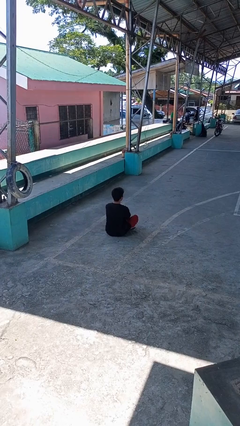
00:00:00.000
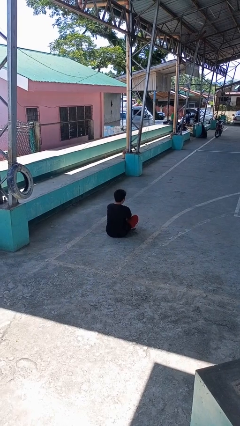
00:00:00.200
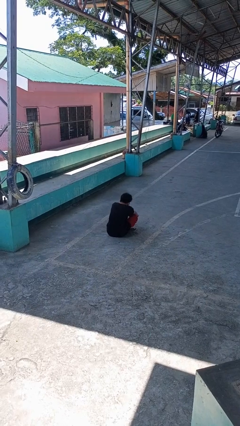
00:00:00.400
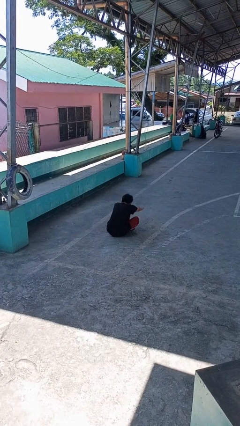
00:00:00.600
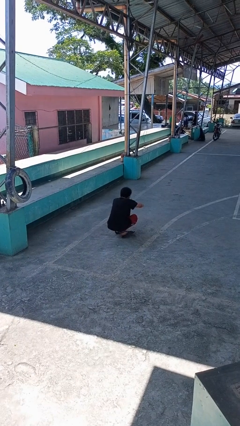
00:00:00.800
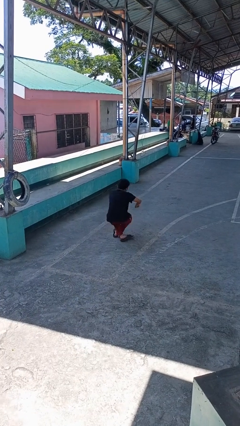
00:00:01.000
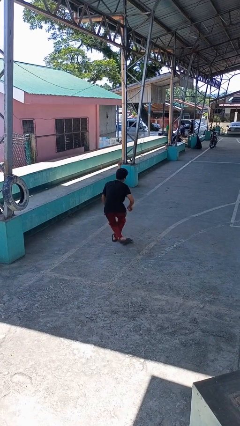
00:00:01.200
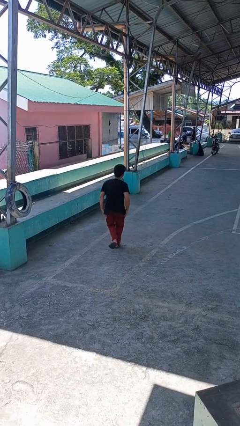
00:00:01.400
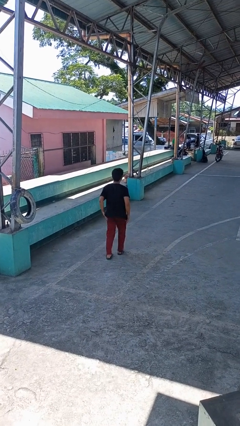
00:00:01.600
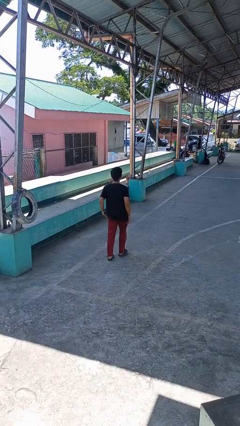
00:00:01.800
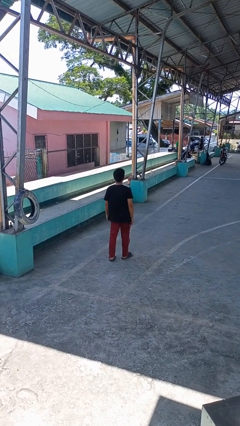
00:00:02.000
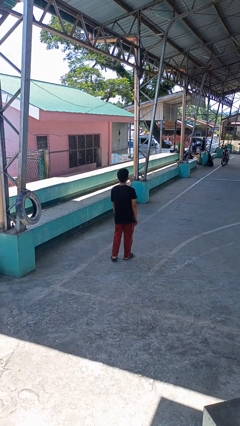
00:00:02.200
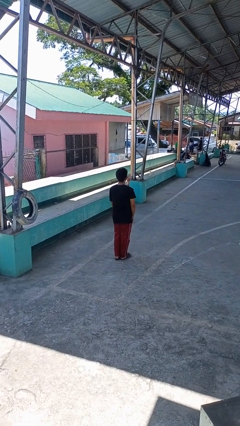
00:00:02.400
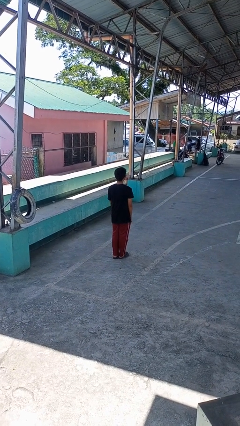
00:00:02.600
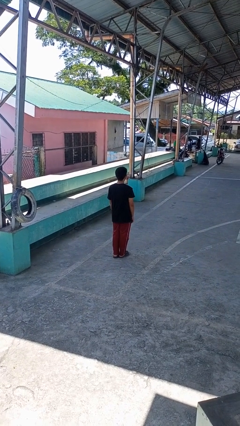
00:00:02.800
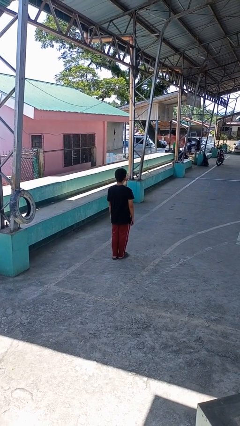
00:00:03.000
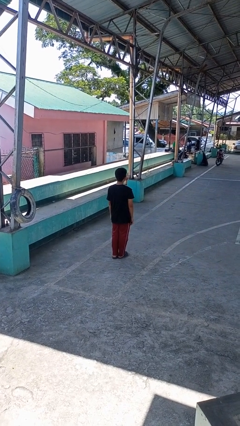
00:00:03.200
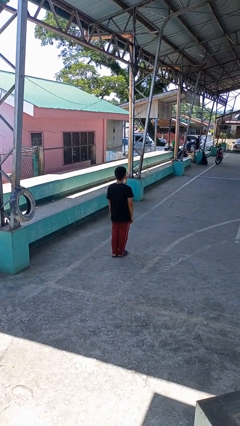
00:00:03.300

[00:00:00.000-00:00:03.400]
person stands up from floor

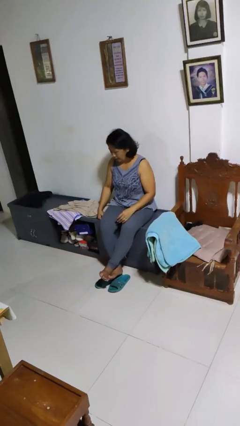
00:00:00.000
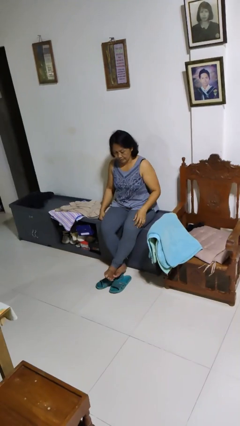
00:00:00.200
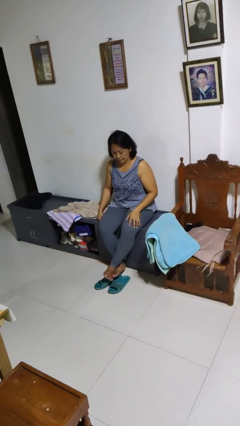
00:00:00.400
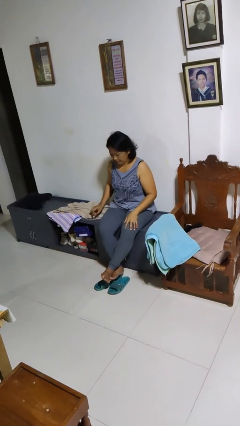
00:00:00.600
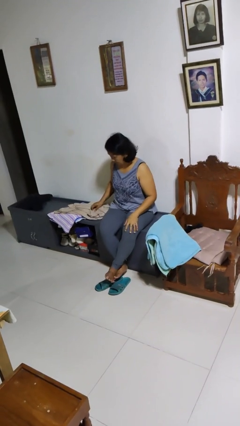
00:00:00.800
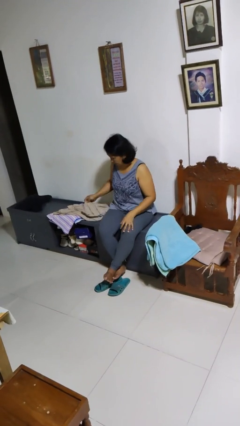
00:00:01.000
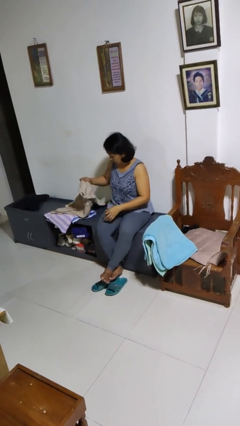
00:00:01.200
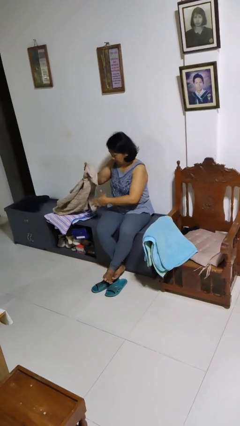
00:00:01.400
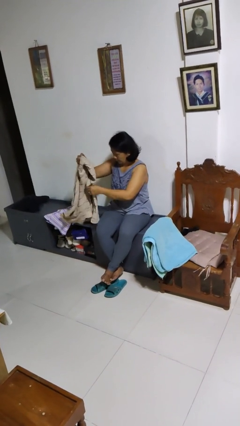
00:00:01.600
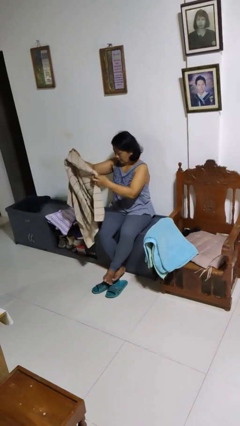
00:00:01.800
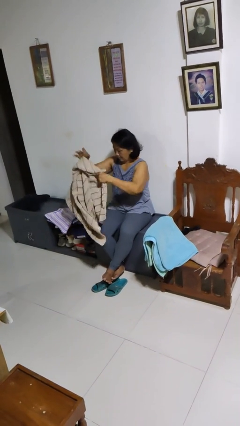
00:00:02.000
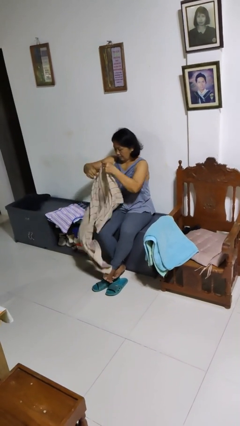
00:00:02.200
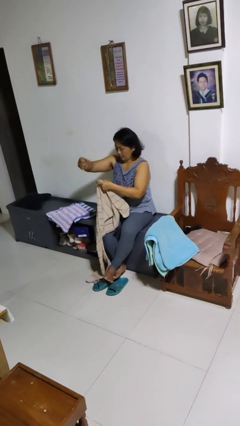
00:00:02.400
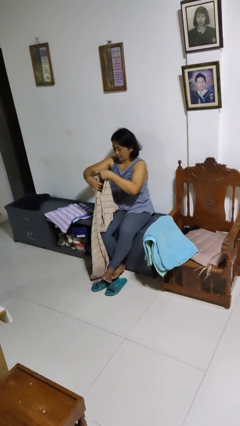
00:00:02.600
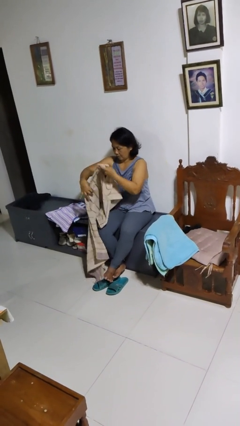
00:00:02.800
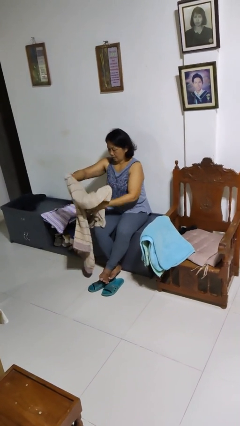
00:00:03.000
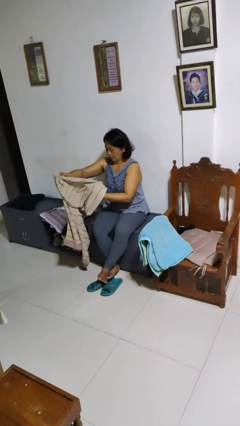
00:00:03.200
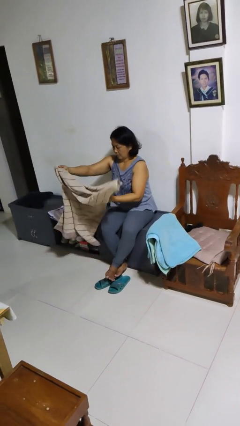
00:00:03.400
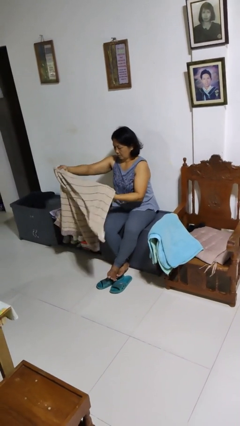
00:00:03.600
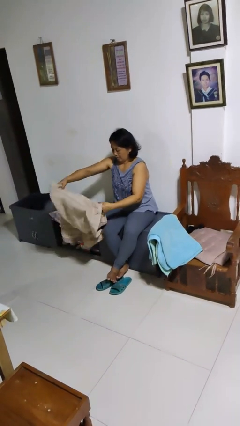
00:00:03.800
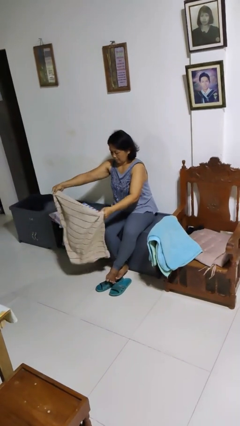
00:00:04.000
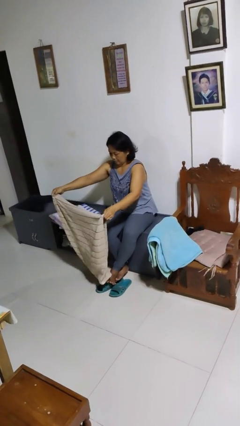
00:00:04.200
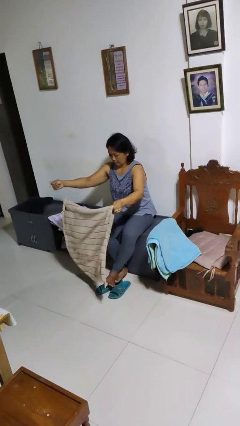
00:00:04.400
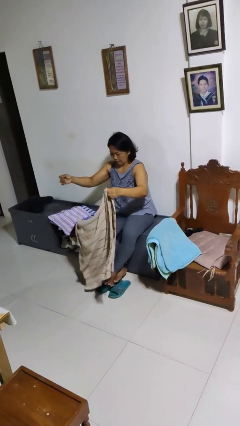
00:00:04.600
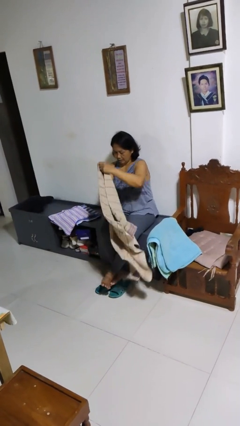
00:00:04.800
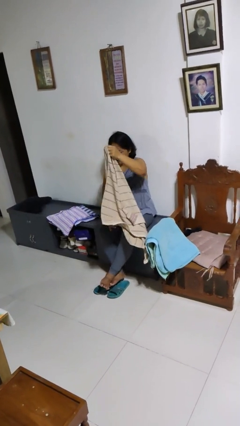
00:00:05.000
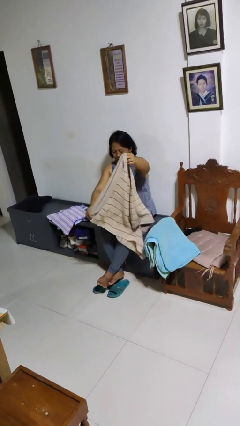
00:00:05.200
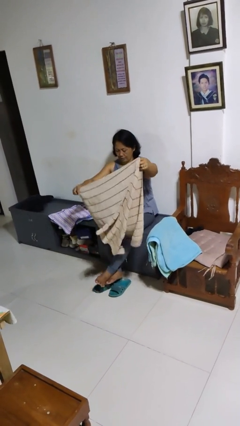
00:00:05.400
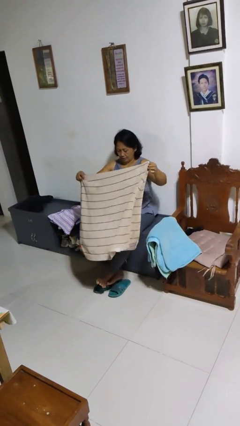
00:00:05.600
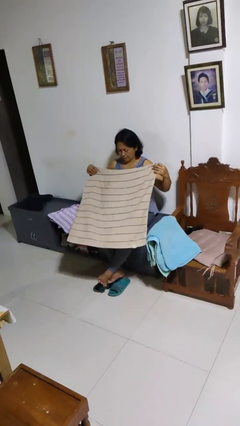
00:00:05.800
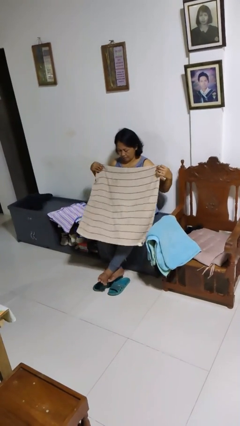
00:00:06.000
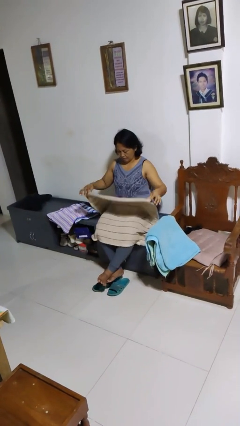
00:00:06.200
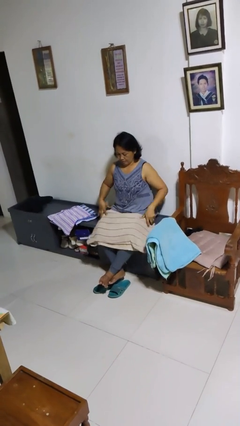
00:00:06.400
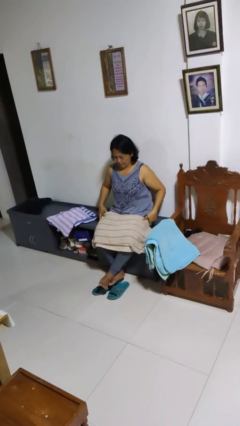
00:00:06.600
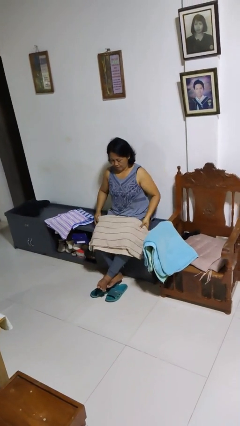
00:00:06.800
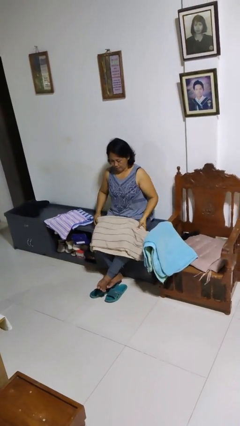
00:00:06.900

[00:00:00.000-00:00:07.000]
person folds towel

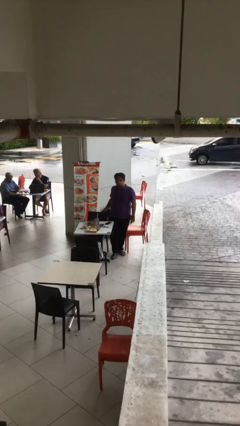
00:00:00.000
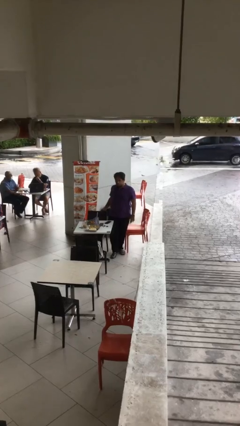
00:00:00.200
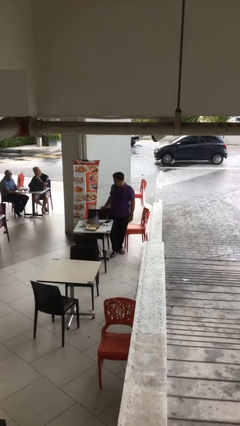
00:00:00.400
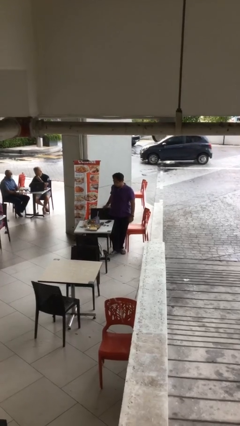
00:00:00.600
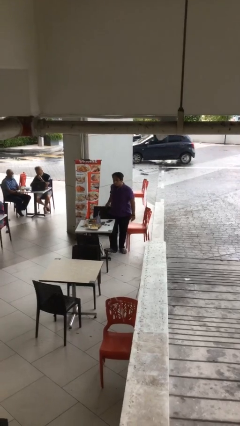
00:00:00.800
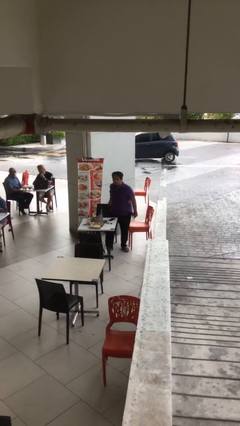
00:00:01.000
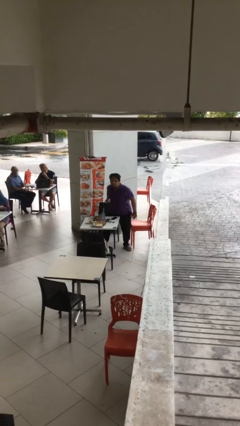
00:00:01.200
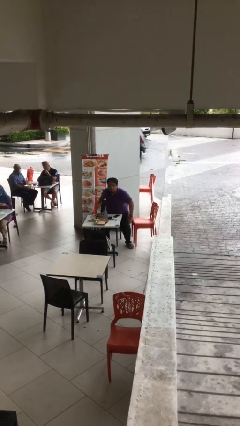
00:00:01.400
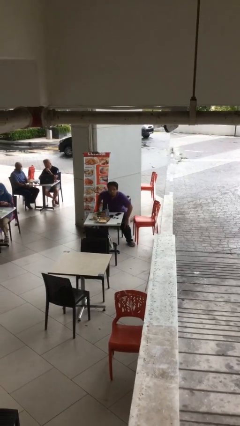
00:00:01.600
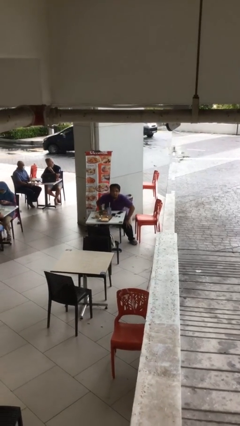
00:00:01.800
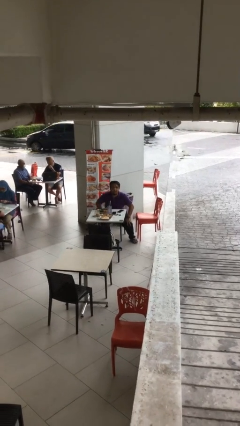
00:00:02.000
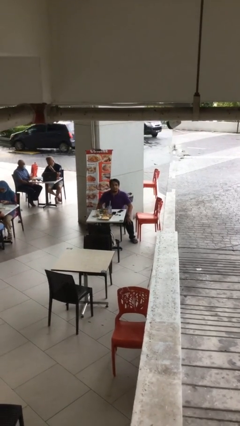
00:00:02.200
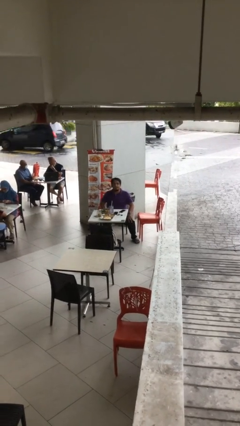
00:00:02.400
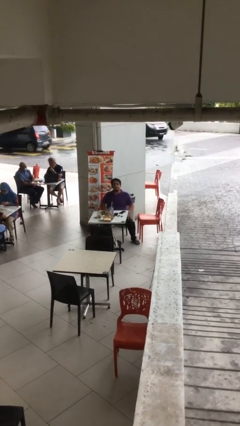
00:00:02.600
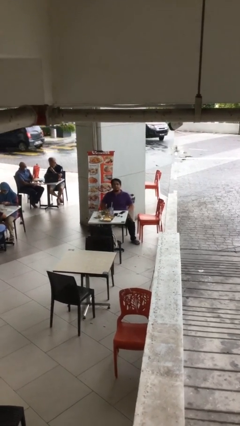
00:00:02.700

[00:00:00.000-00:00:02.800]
person sits down

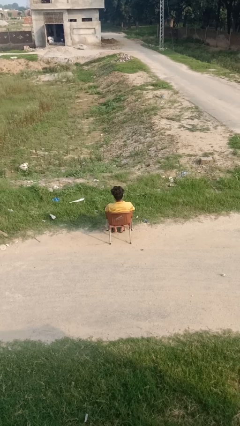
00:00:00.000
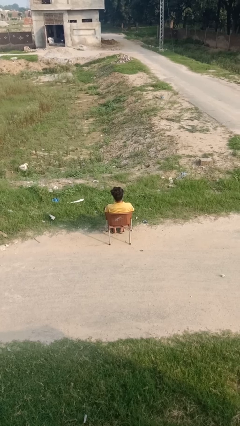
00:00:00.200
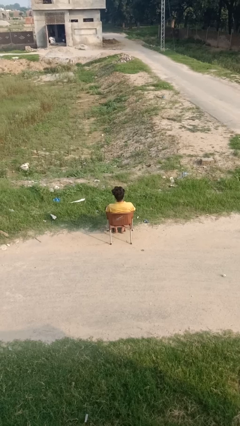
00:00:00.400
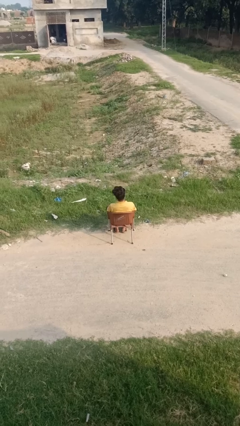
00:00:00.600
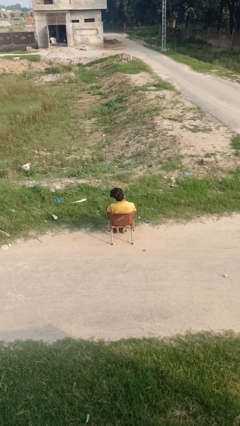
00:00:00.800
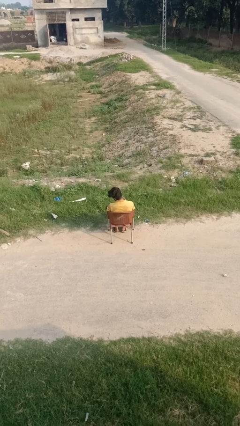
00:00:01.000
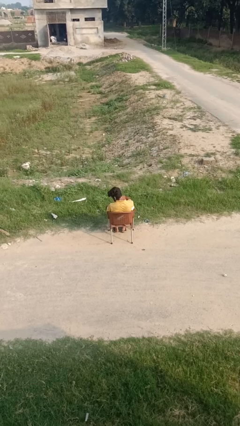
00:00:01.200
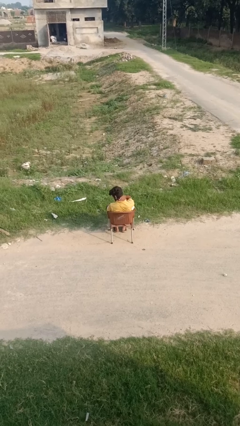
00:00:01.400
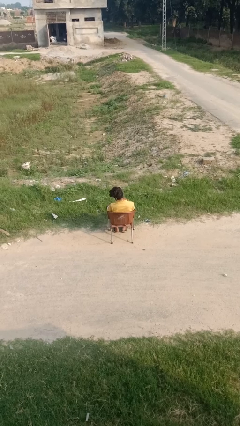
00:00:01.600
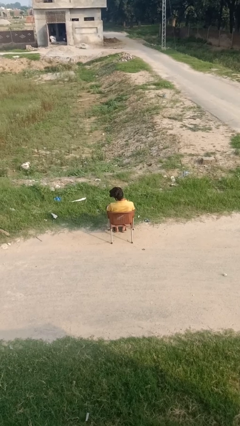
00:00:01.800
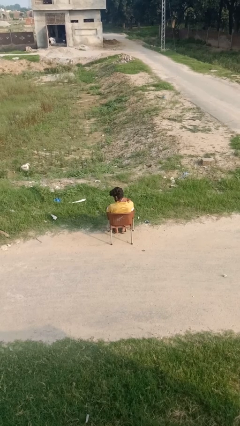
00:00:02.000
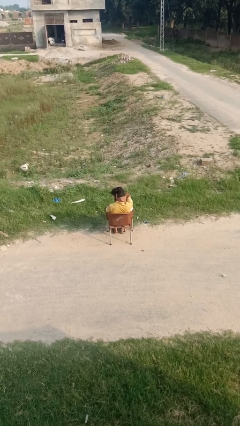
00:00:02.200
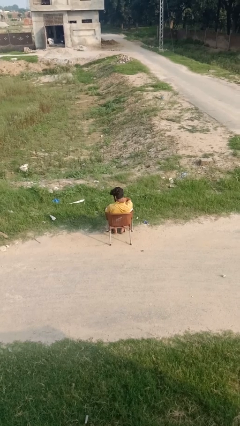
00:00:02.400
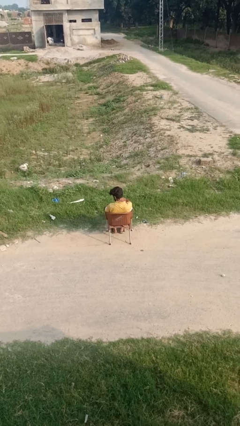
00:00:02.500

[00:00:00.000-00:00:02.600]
person rubs neck

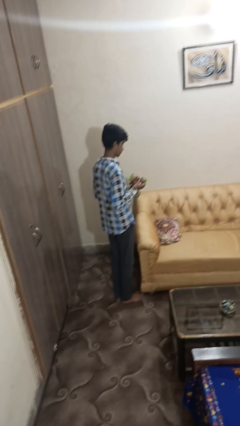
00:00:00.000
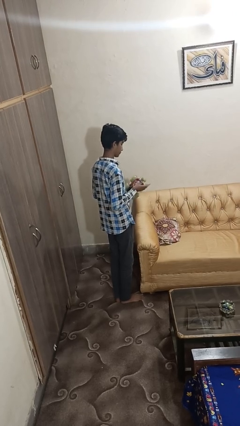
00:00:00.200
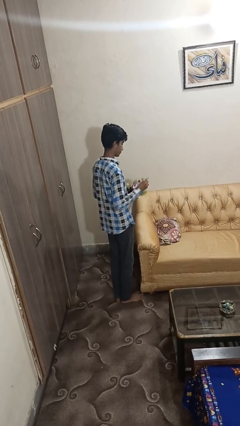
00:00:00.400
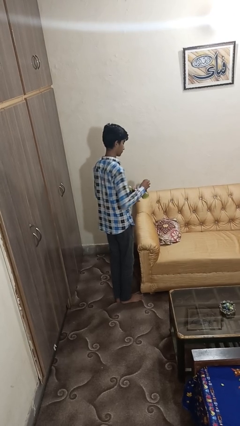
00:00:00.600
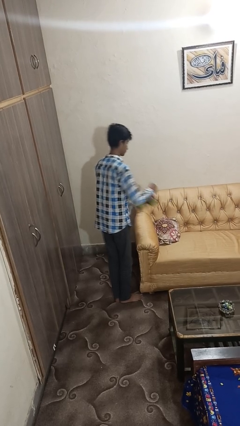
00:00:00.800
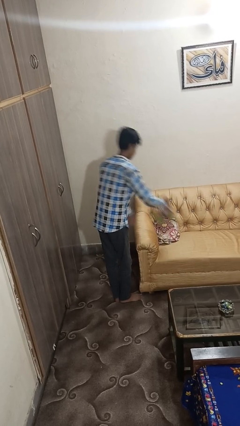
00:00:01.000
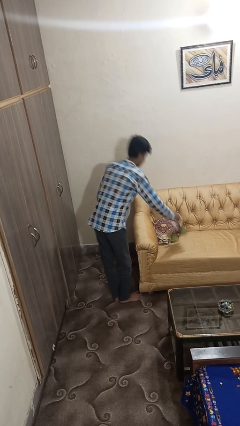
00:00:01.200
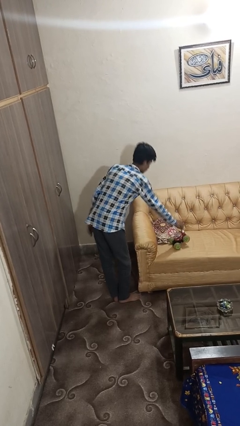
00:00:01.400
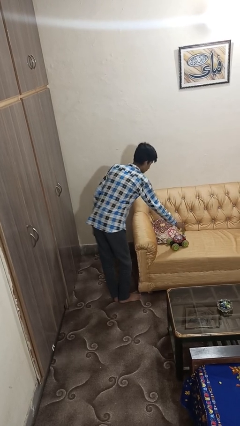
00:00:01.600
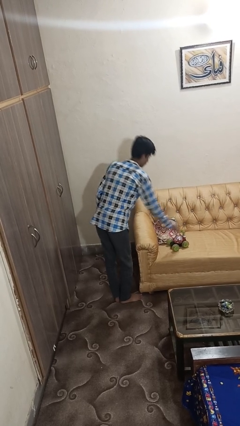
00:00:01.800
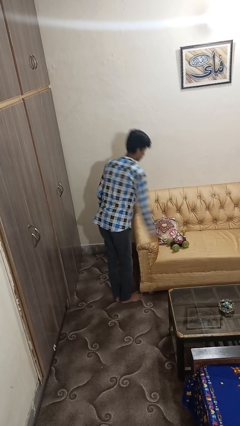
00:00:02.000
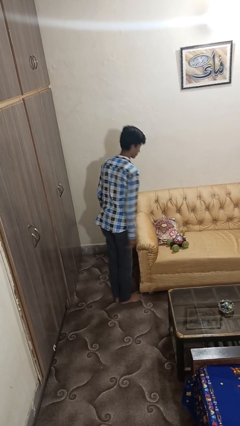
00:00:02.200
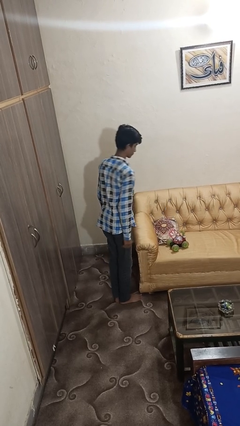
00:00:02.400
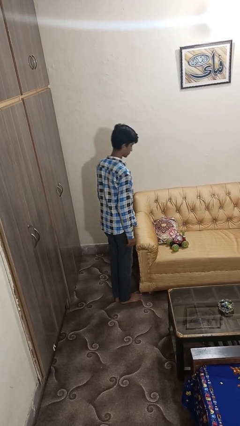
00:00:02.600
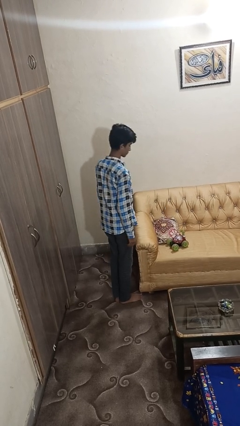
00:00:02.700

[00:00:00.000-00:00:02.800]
person puts down object on couch
